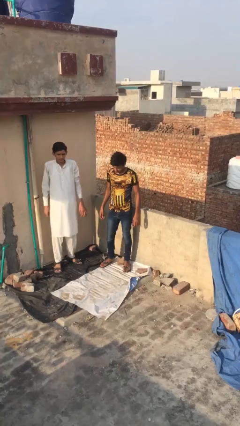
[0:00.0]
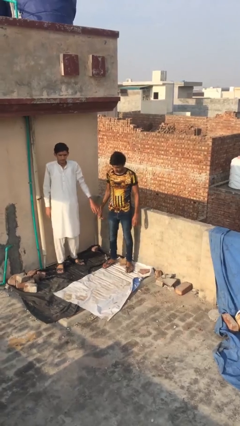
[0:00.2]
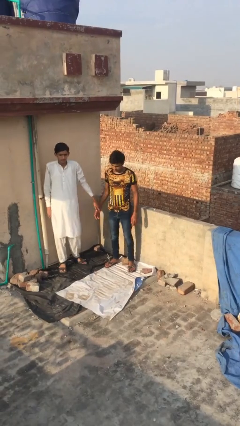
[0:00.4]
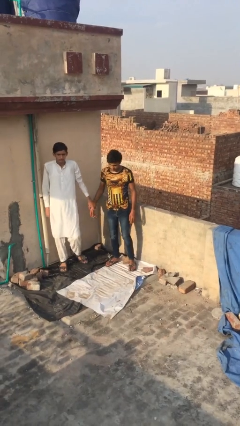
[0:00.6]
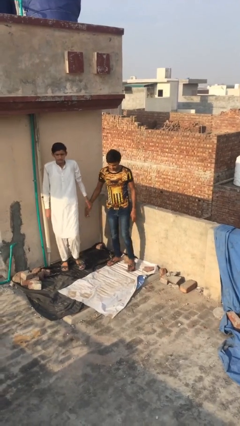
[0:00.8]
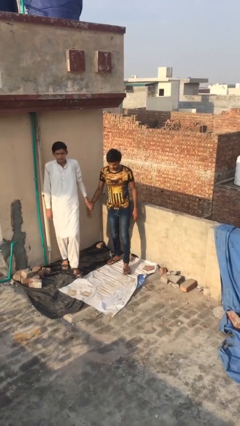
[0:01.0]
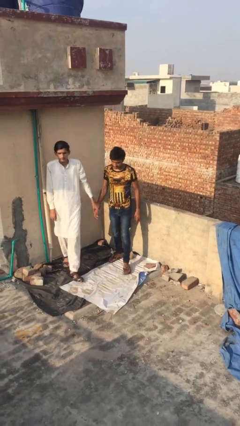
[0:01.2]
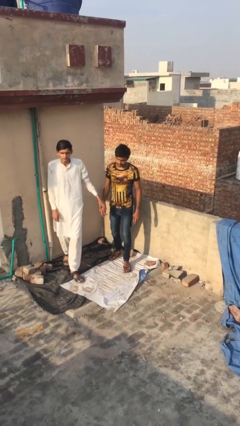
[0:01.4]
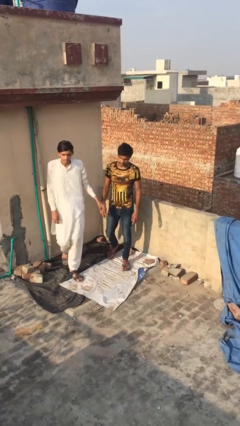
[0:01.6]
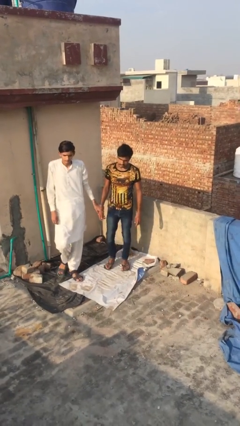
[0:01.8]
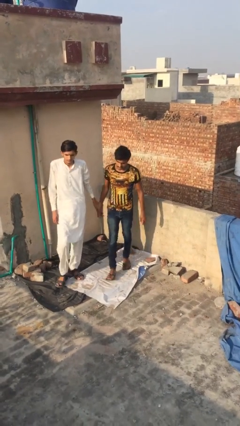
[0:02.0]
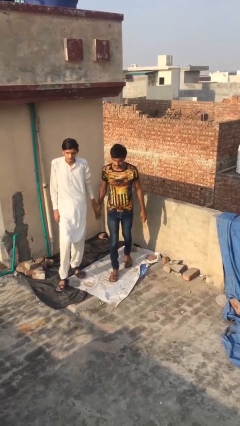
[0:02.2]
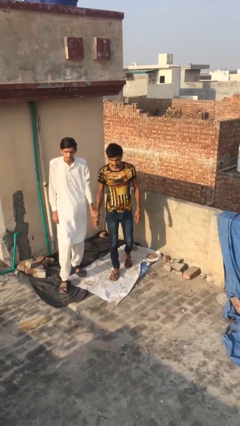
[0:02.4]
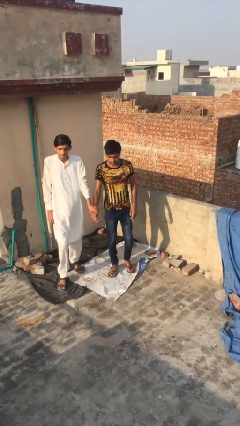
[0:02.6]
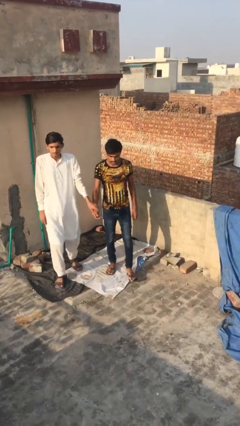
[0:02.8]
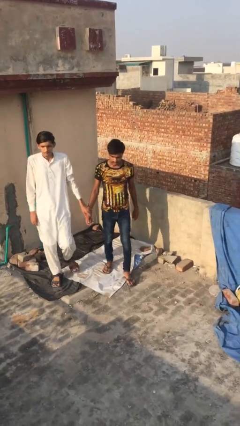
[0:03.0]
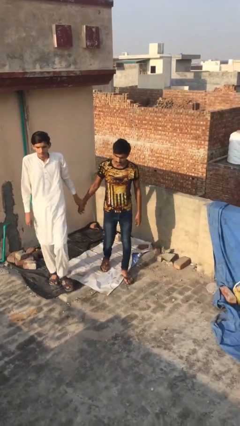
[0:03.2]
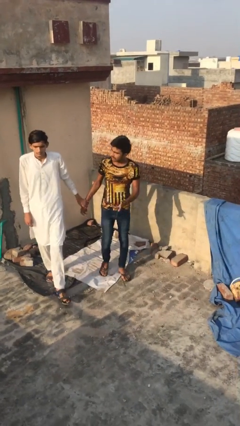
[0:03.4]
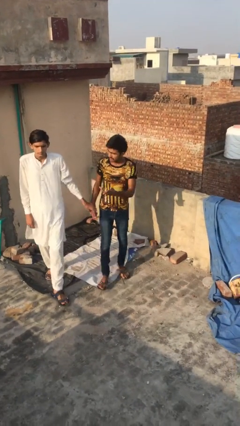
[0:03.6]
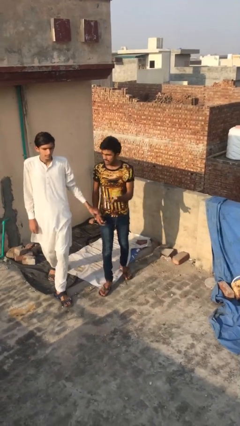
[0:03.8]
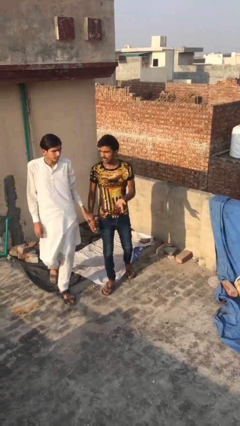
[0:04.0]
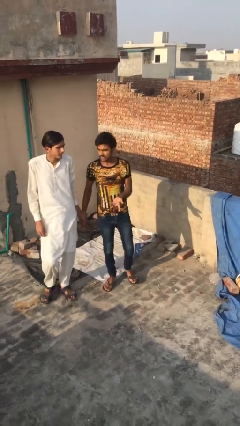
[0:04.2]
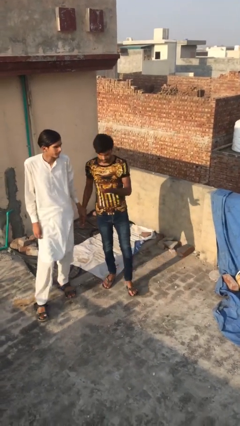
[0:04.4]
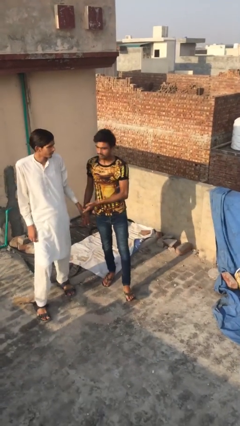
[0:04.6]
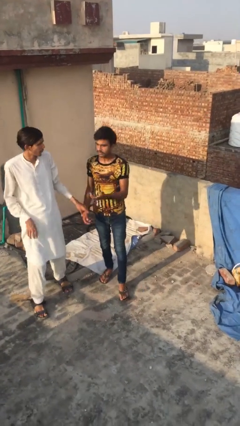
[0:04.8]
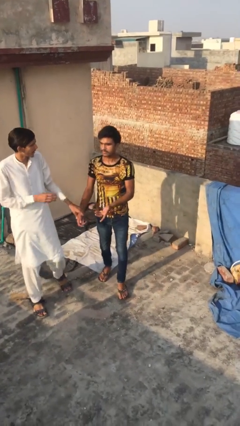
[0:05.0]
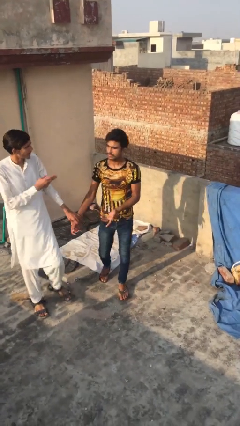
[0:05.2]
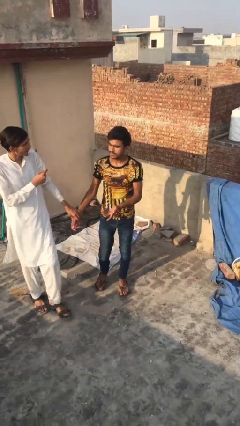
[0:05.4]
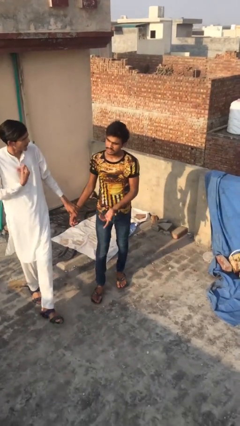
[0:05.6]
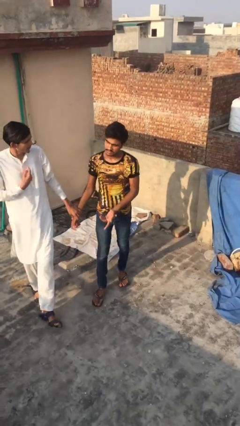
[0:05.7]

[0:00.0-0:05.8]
person holds hand

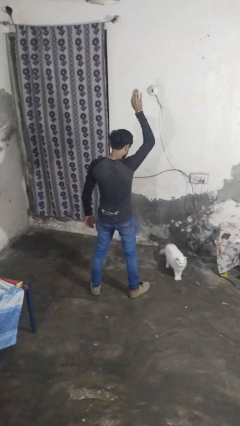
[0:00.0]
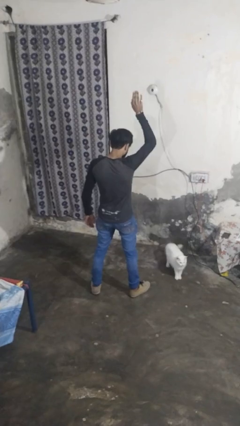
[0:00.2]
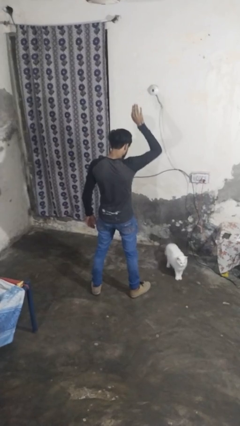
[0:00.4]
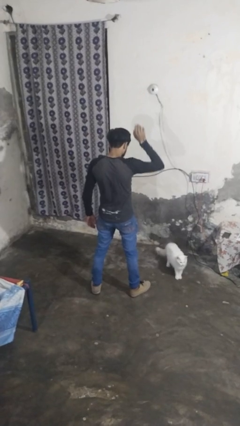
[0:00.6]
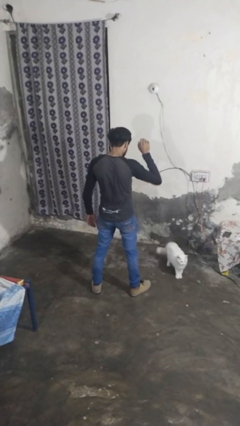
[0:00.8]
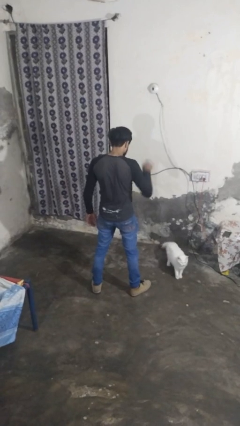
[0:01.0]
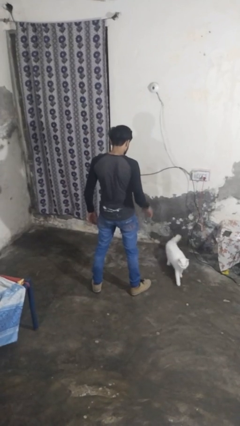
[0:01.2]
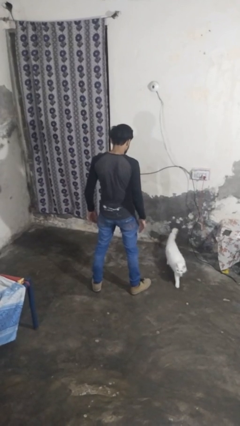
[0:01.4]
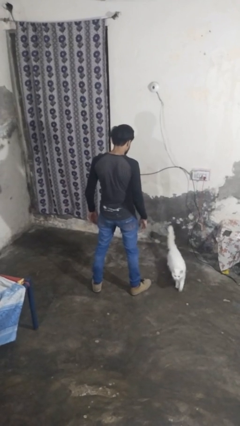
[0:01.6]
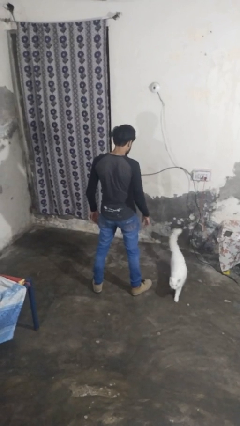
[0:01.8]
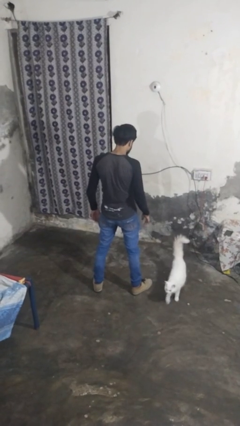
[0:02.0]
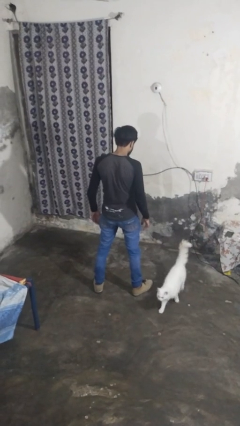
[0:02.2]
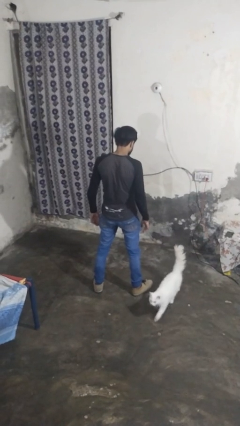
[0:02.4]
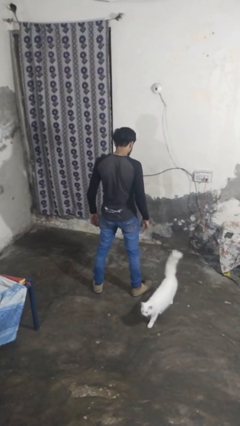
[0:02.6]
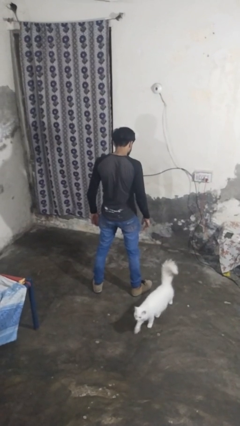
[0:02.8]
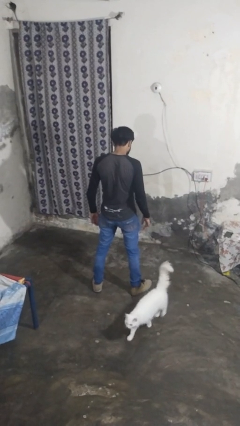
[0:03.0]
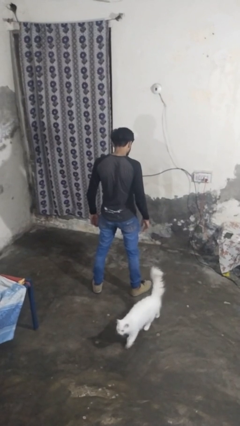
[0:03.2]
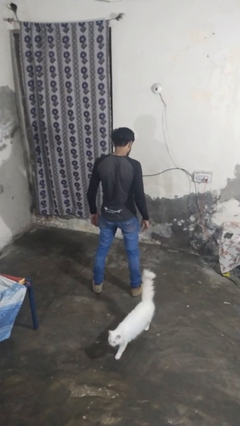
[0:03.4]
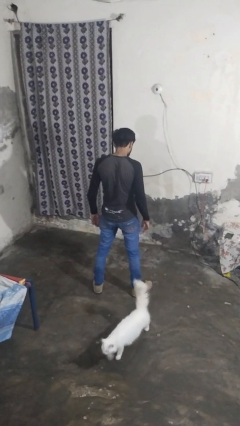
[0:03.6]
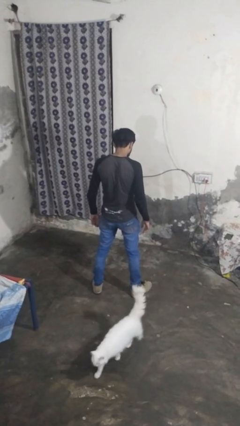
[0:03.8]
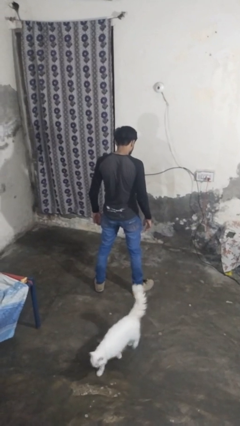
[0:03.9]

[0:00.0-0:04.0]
person gestures lower hand

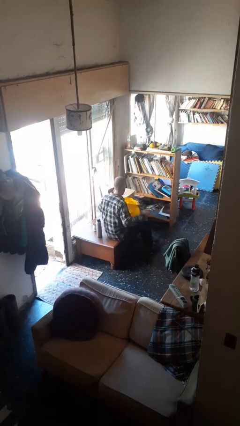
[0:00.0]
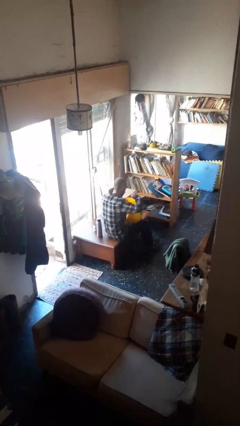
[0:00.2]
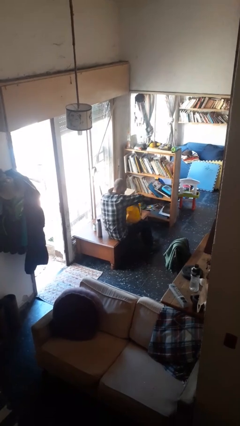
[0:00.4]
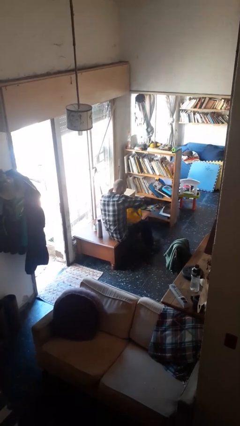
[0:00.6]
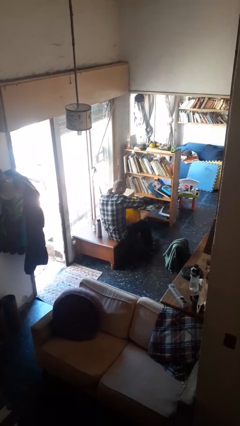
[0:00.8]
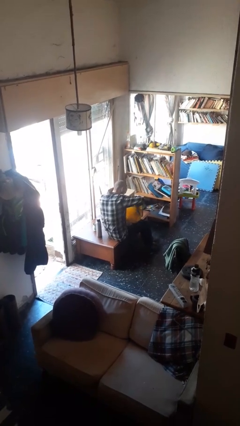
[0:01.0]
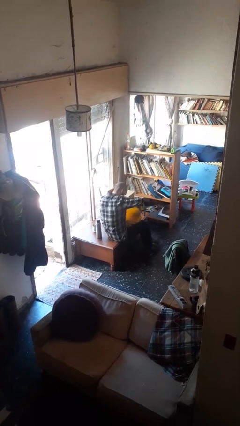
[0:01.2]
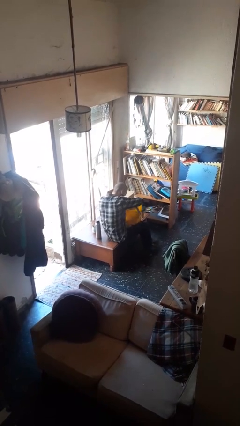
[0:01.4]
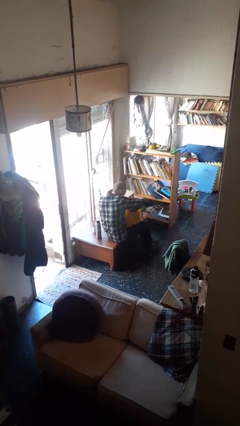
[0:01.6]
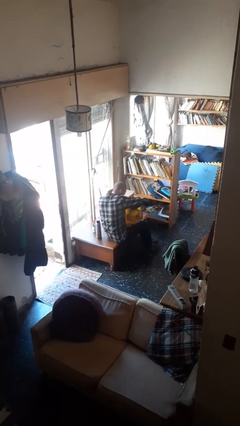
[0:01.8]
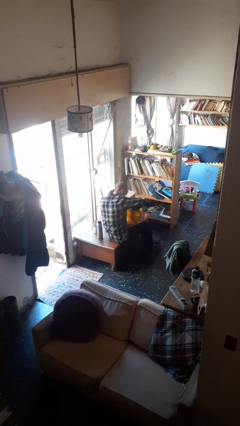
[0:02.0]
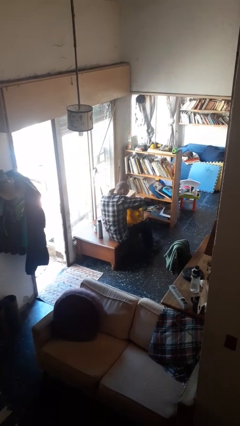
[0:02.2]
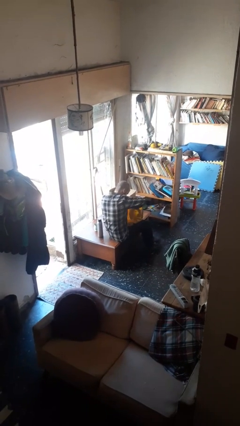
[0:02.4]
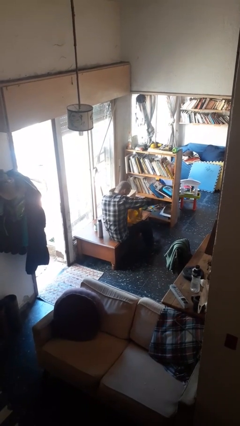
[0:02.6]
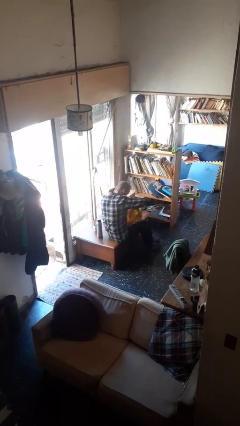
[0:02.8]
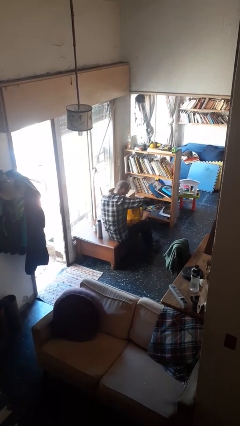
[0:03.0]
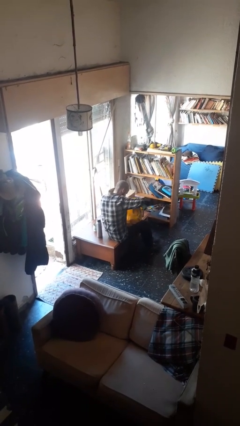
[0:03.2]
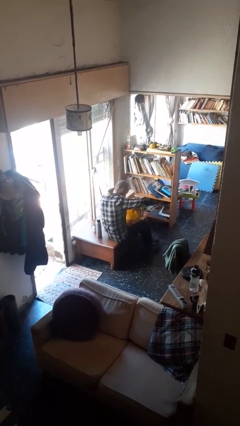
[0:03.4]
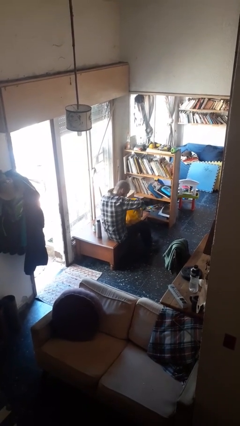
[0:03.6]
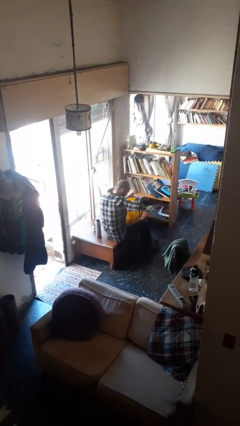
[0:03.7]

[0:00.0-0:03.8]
person searches in bag

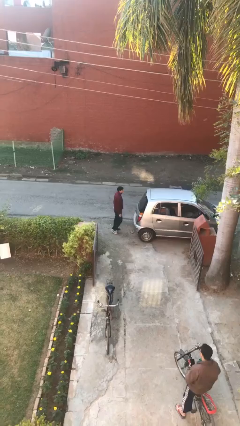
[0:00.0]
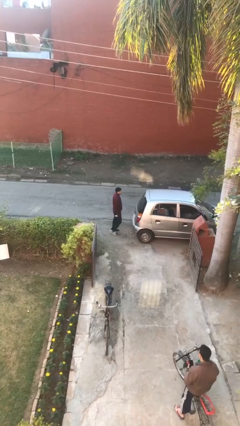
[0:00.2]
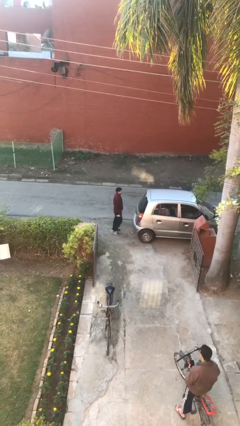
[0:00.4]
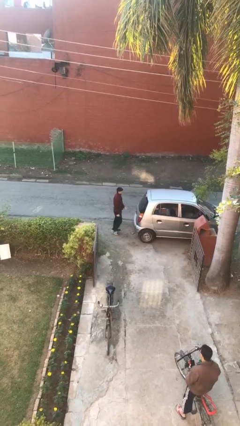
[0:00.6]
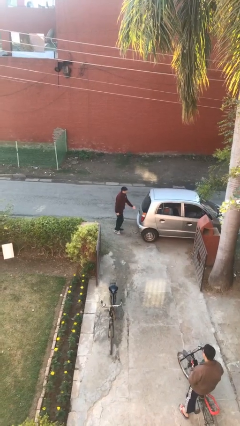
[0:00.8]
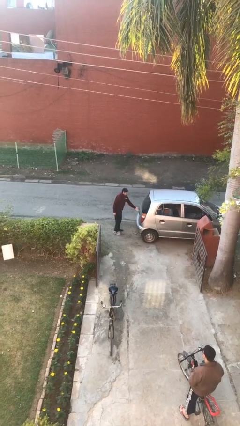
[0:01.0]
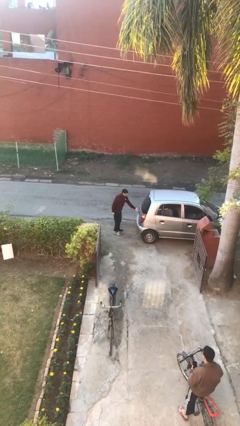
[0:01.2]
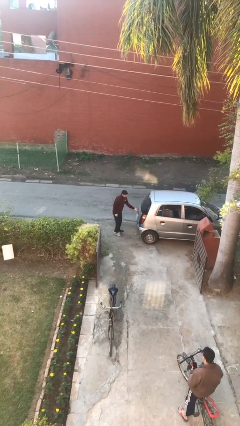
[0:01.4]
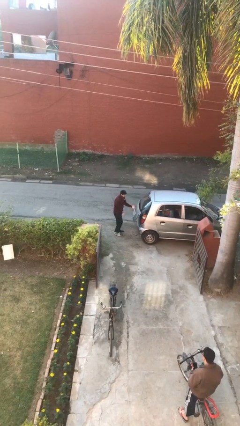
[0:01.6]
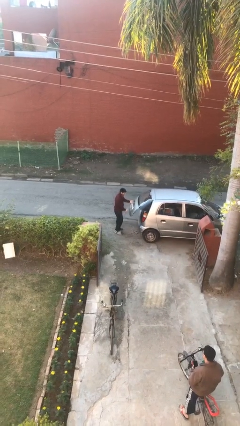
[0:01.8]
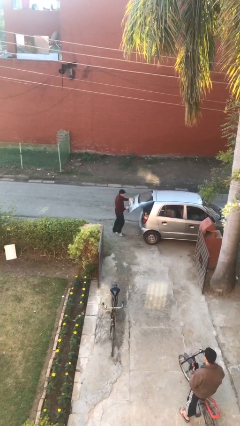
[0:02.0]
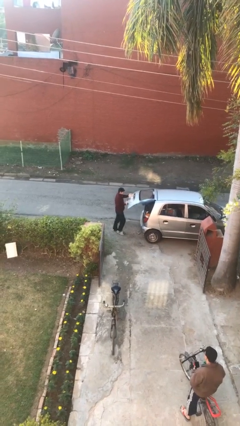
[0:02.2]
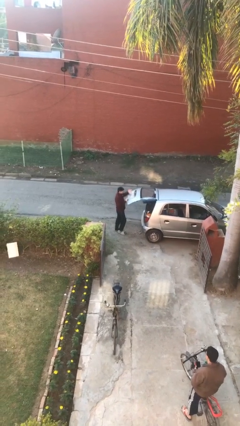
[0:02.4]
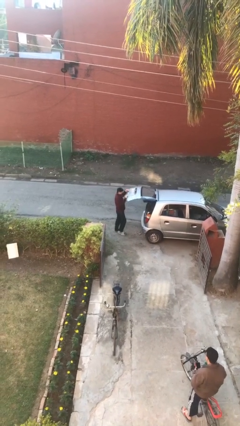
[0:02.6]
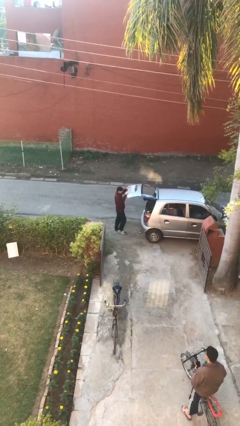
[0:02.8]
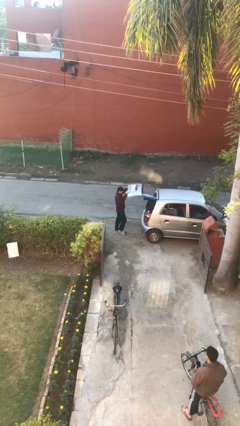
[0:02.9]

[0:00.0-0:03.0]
person opens car trunk

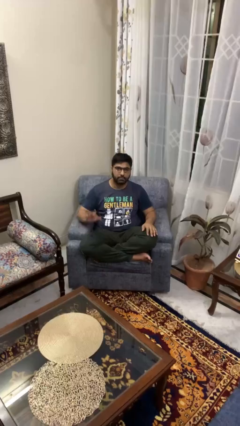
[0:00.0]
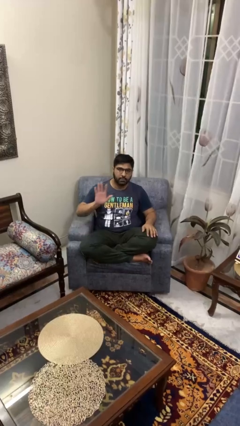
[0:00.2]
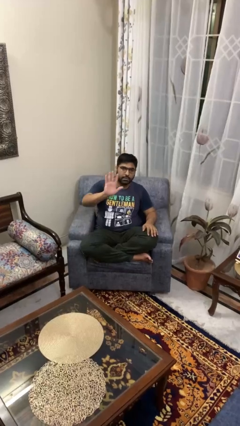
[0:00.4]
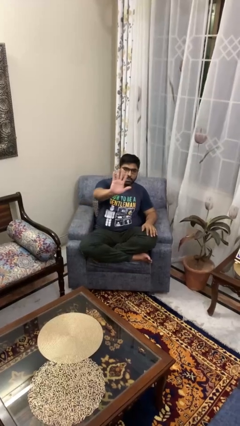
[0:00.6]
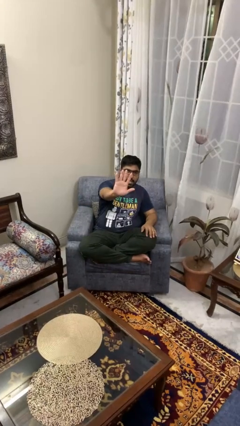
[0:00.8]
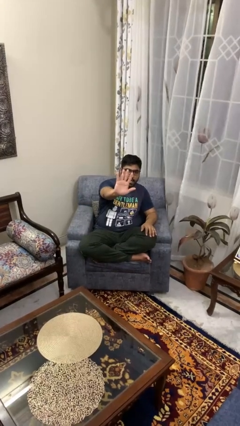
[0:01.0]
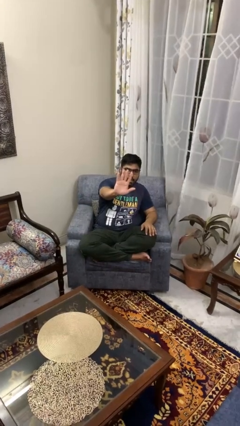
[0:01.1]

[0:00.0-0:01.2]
person gestures number five
